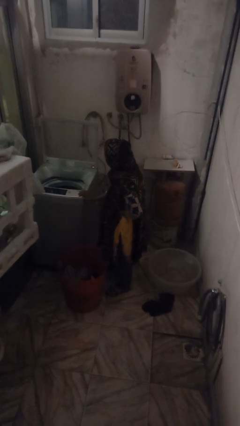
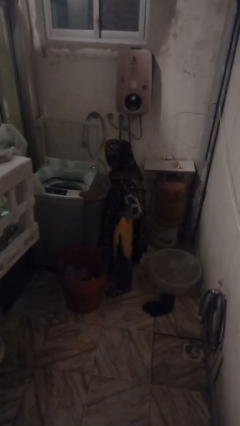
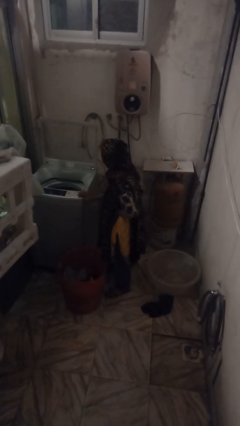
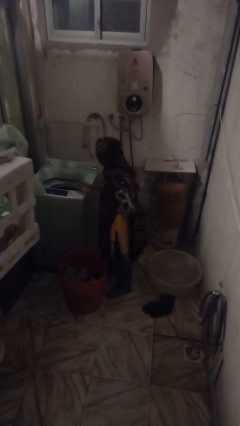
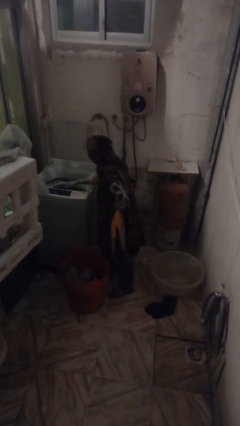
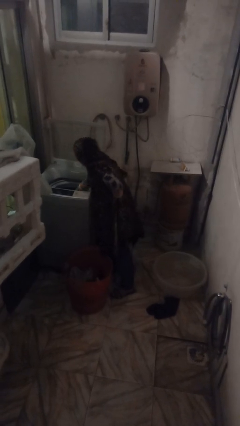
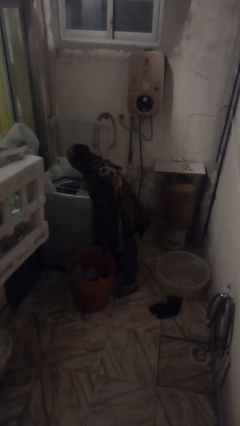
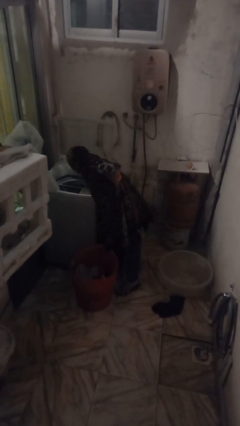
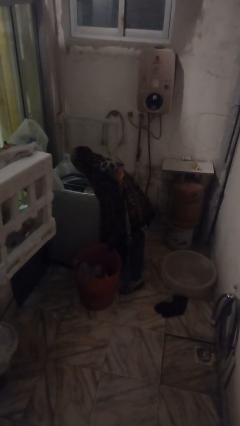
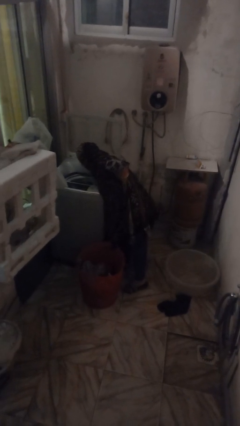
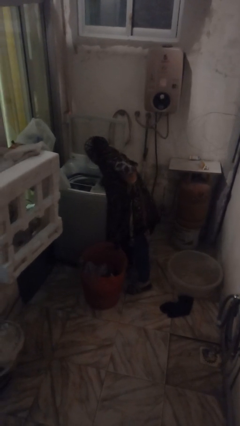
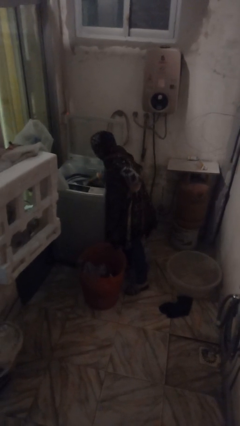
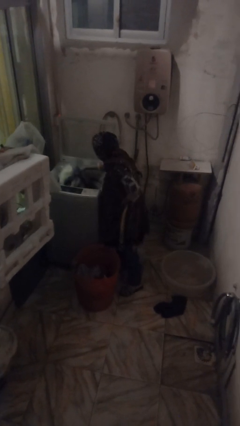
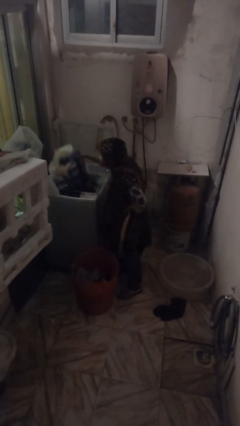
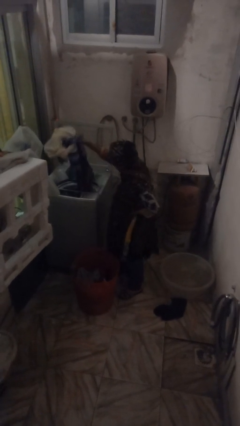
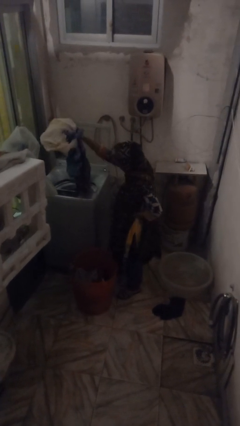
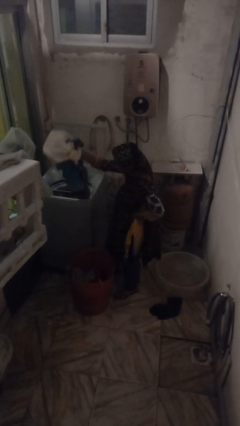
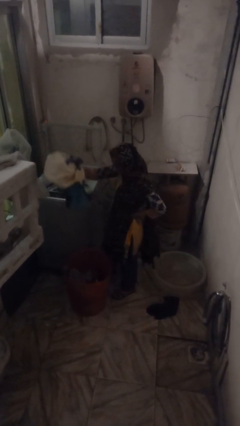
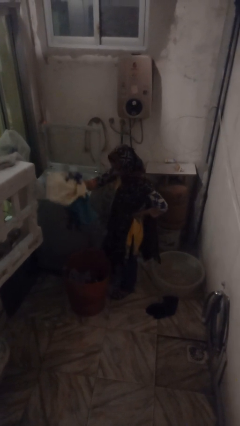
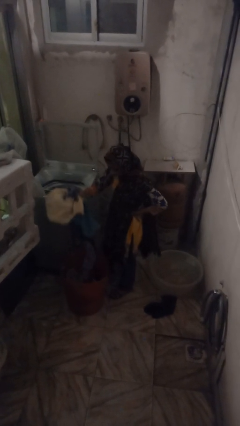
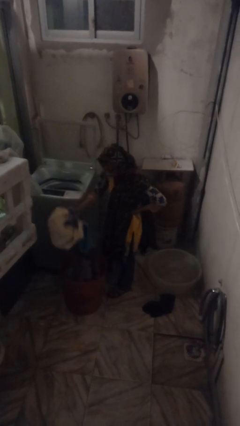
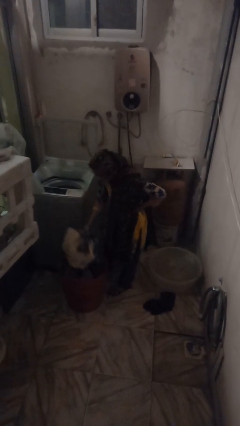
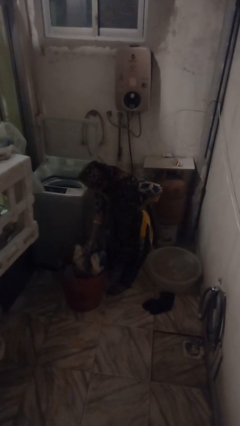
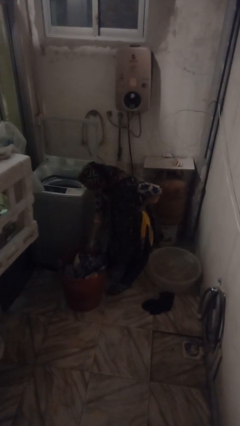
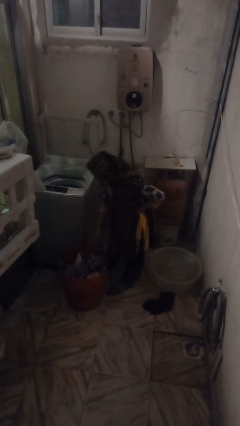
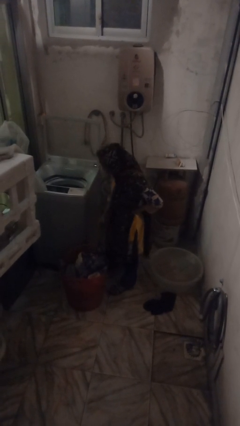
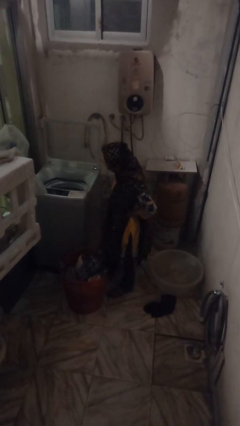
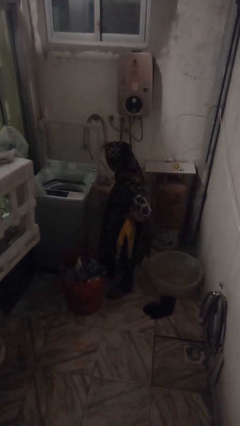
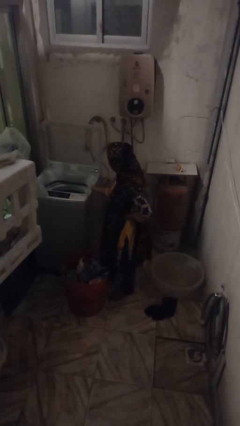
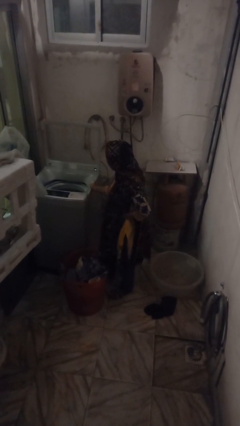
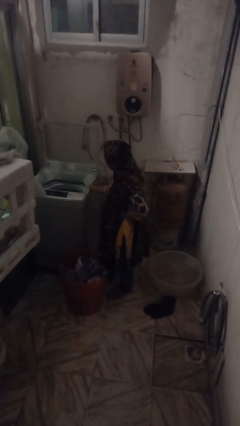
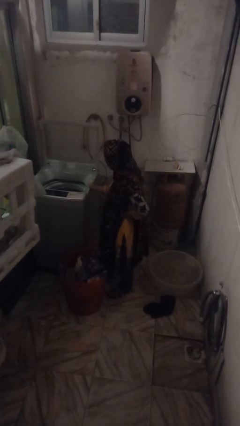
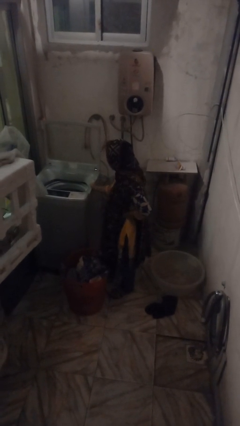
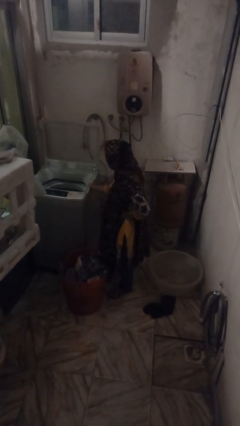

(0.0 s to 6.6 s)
person unloads clotheswasher

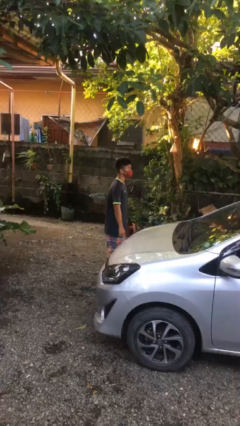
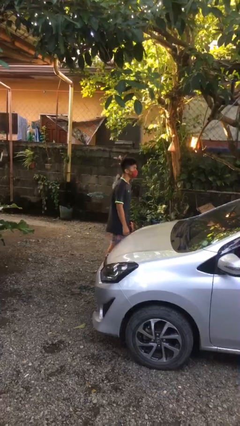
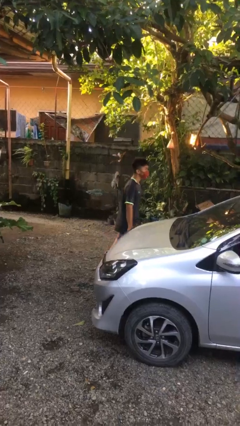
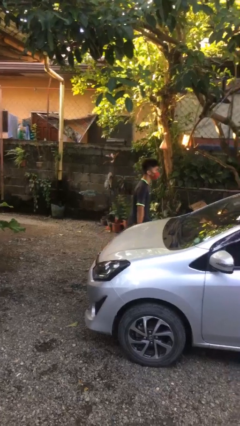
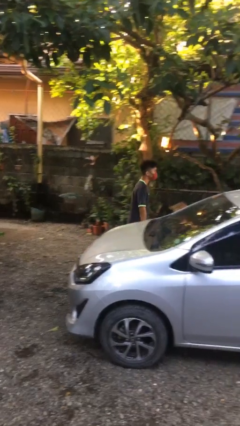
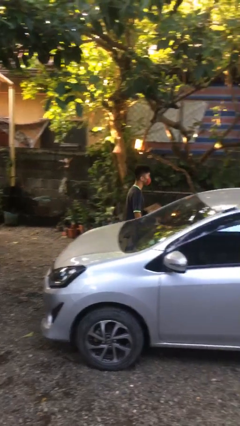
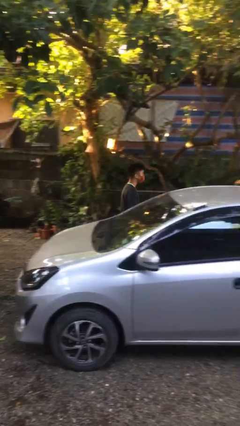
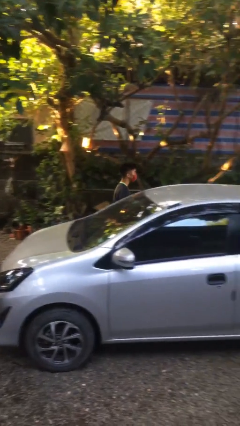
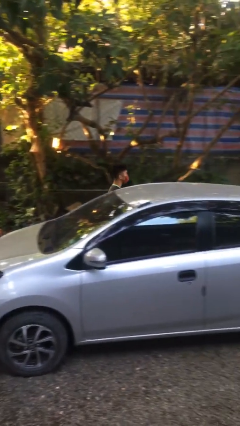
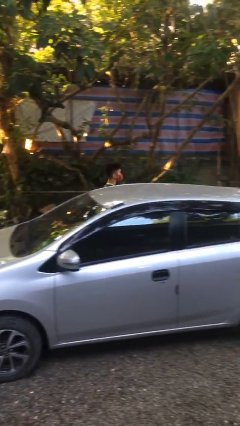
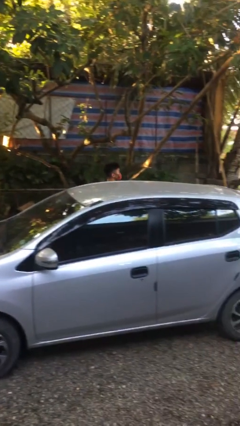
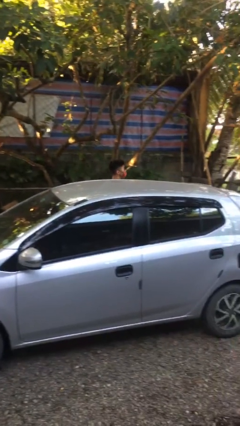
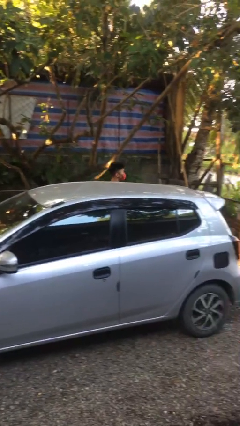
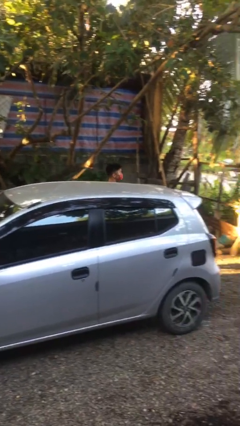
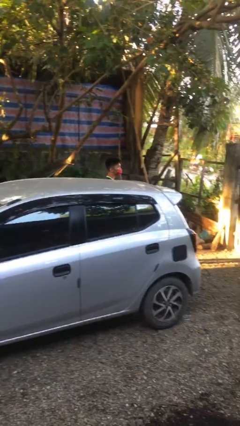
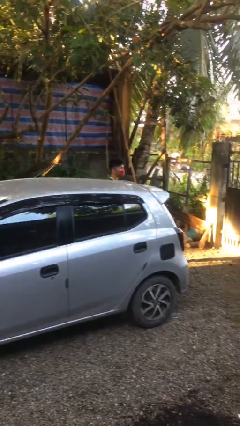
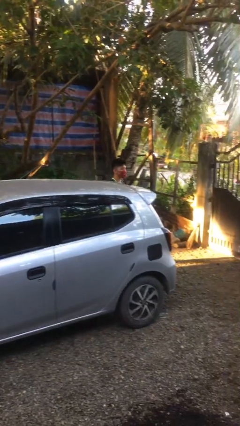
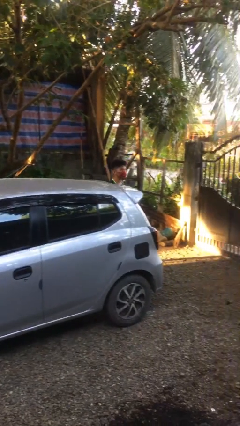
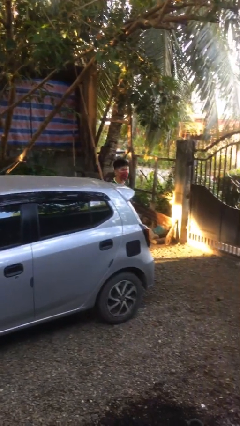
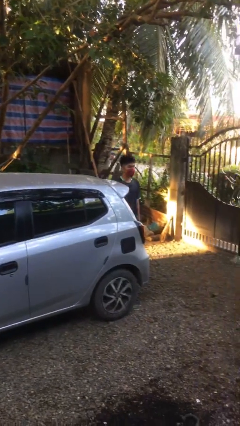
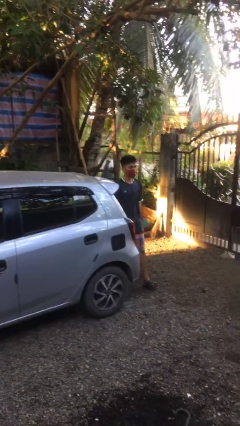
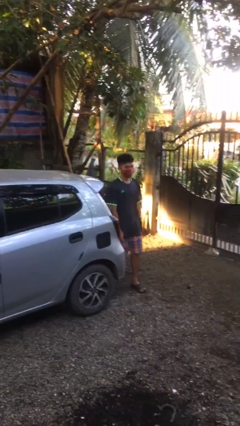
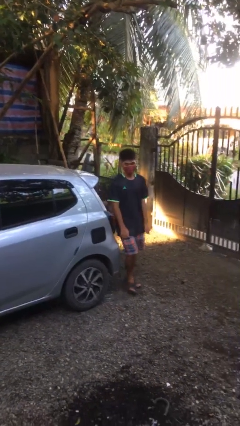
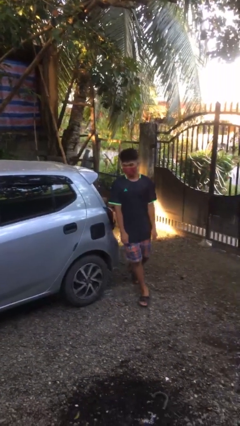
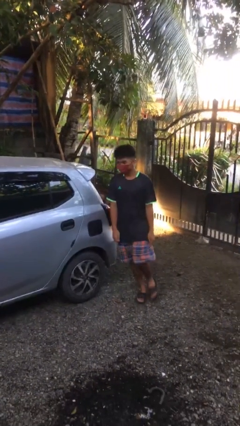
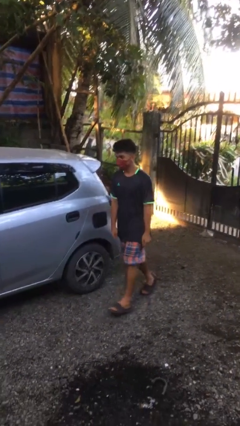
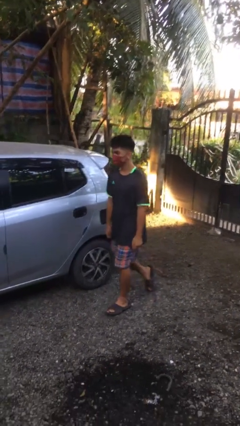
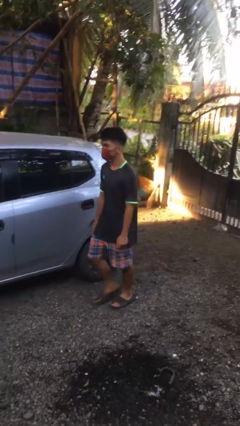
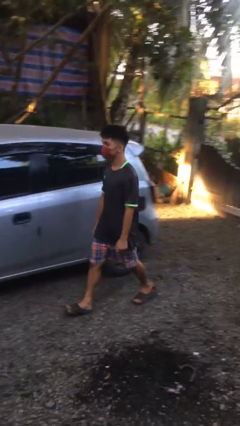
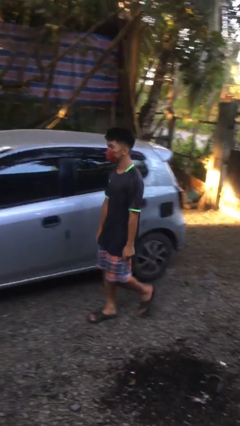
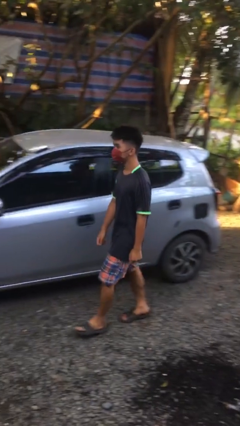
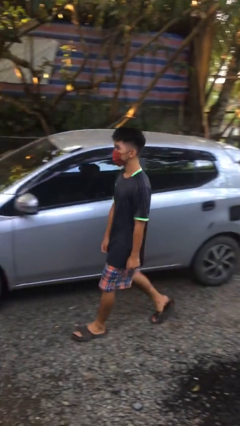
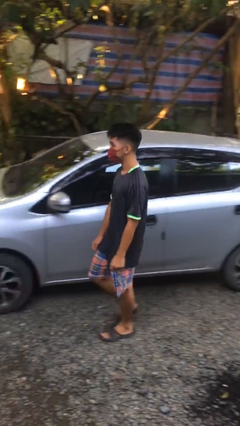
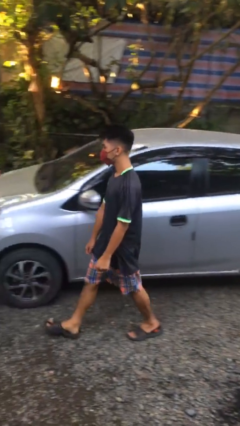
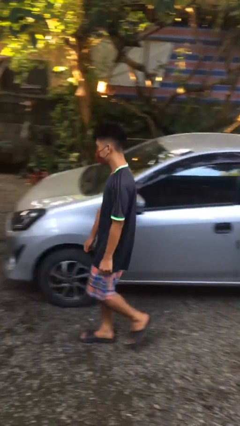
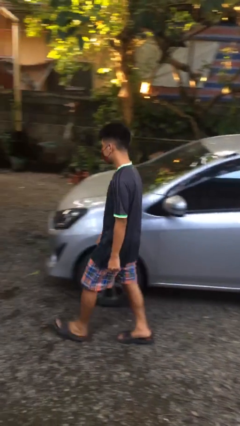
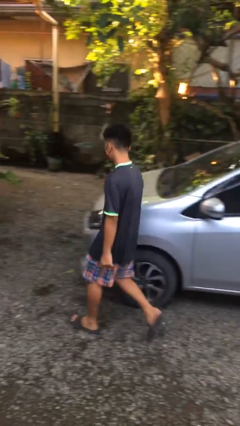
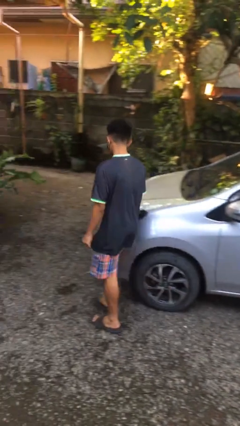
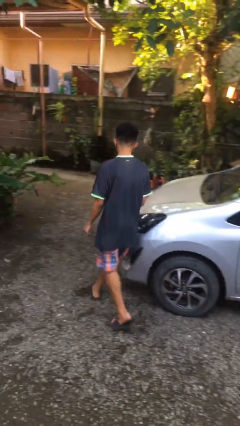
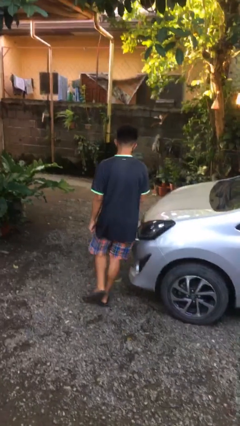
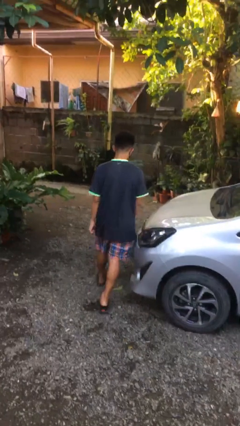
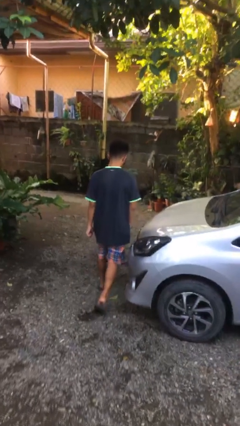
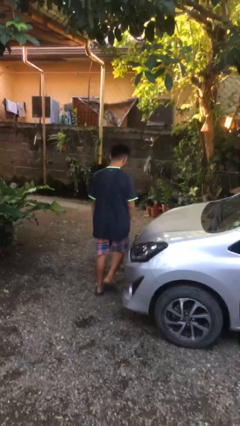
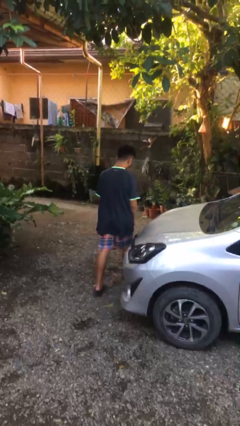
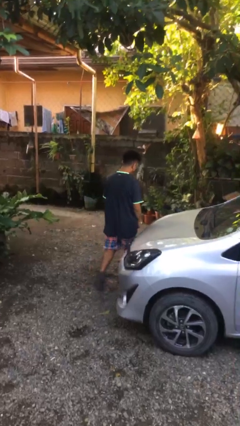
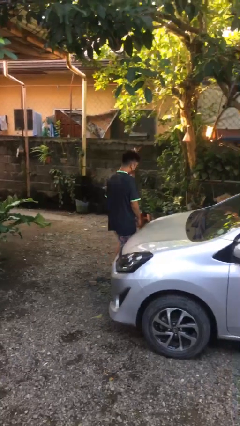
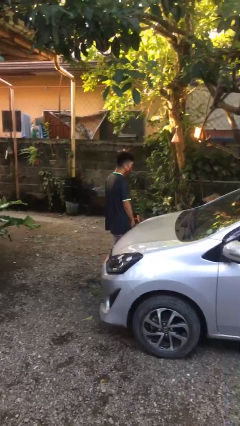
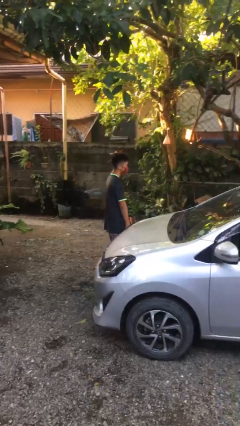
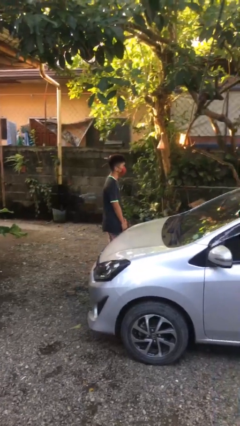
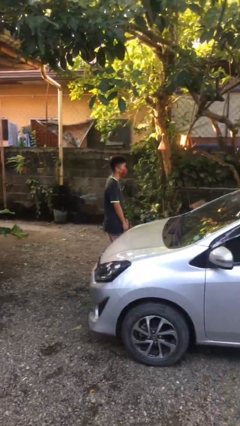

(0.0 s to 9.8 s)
person walks around car

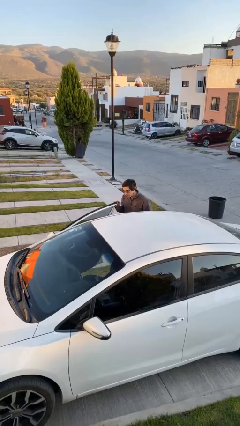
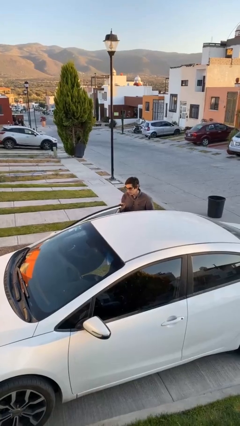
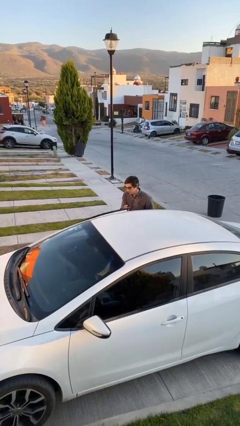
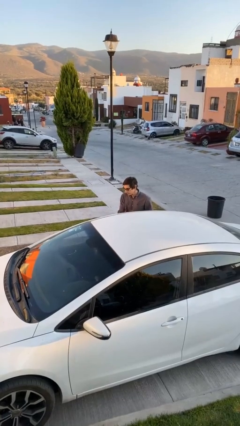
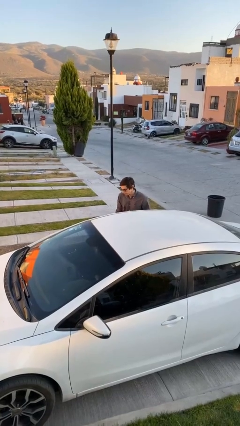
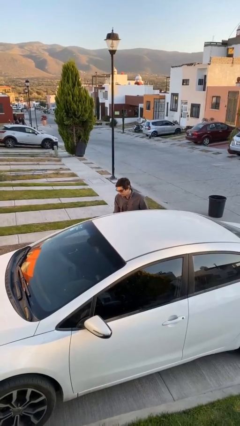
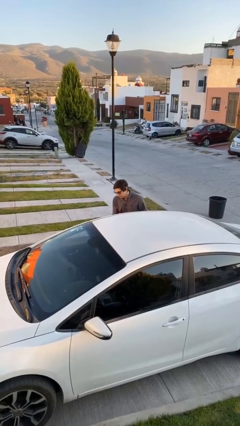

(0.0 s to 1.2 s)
person closes car door

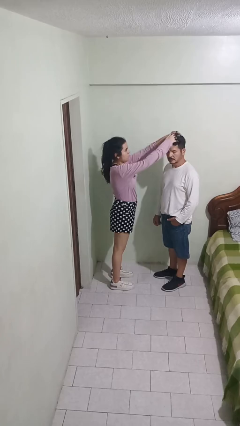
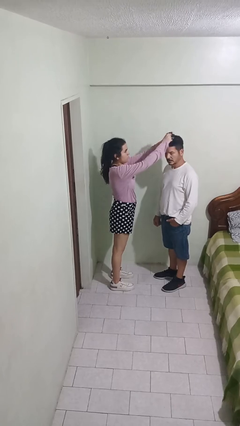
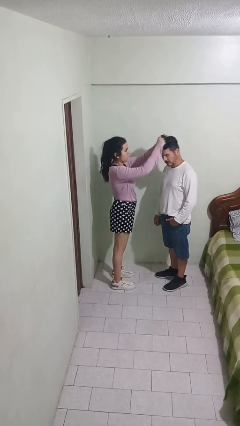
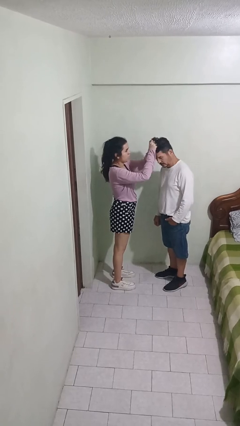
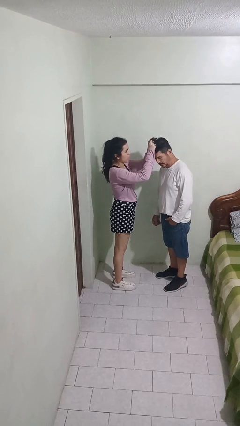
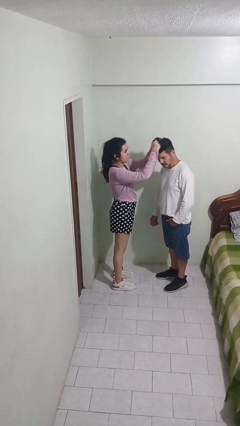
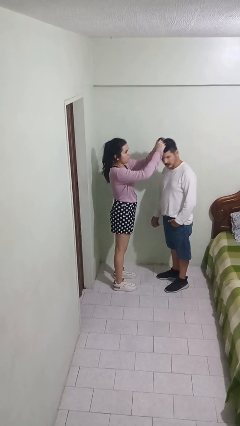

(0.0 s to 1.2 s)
person grabs person by hair
